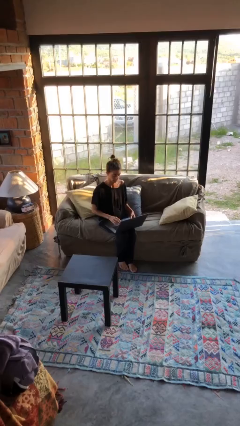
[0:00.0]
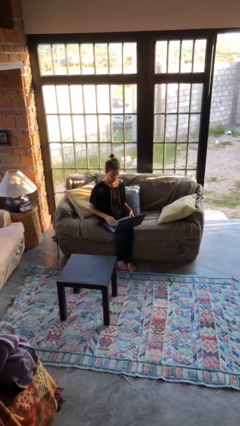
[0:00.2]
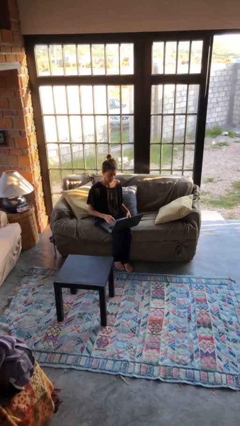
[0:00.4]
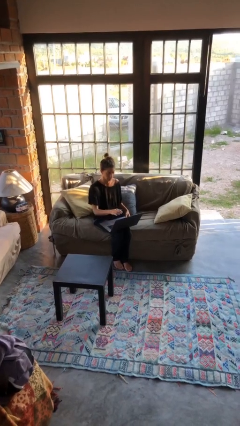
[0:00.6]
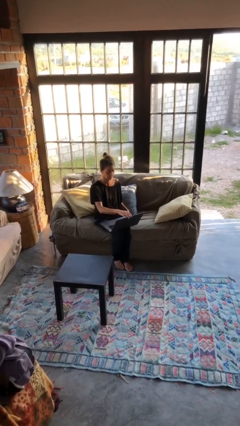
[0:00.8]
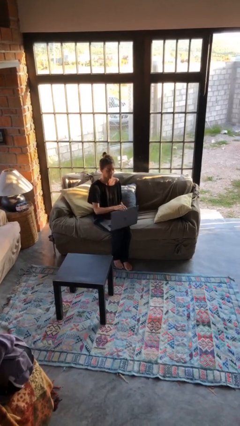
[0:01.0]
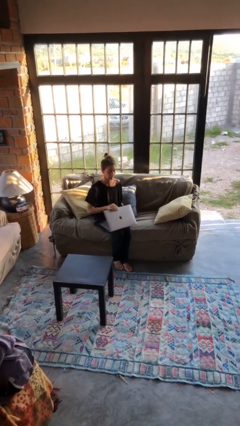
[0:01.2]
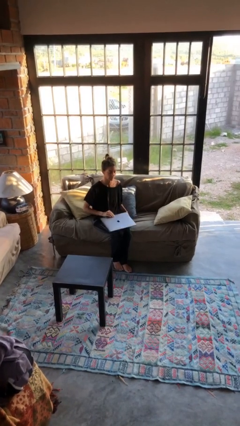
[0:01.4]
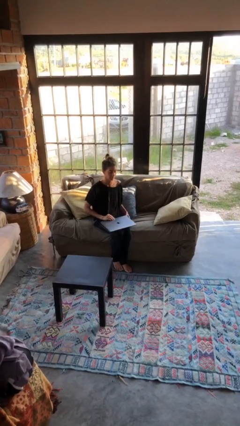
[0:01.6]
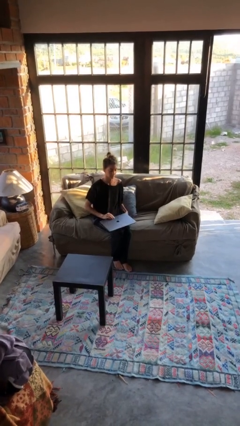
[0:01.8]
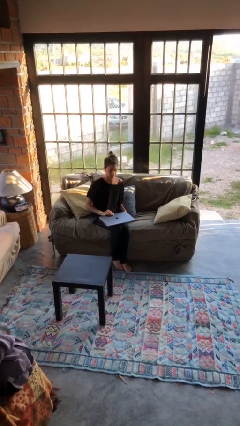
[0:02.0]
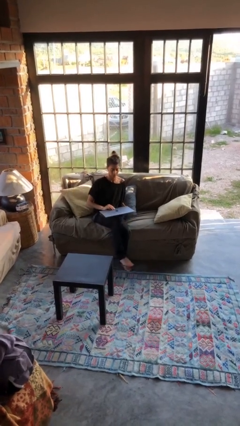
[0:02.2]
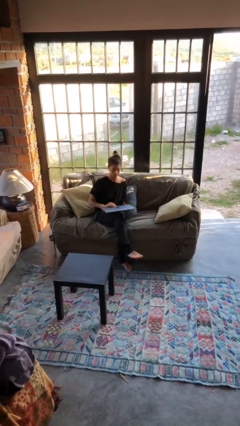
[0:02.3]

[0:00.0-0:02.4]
person closes laptop

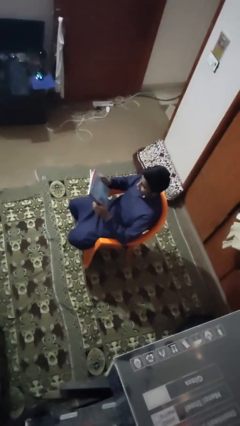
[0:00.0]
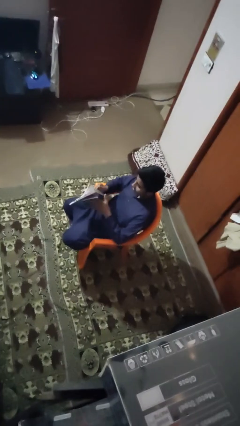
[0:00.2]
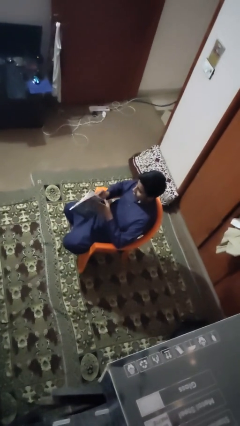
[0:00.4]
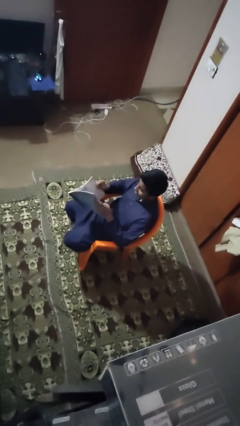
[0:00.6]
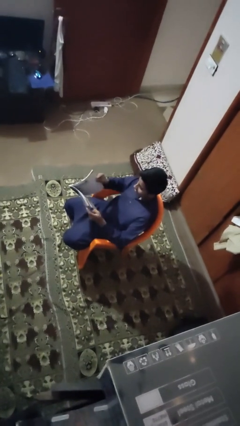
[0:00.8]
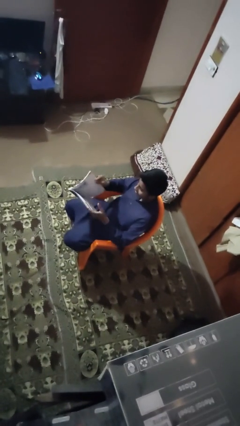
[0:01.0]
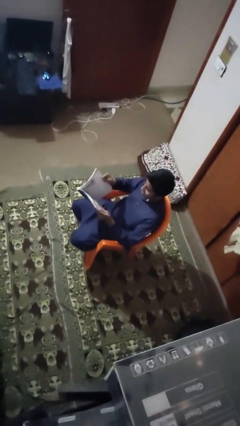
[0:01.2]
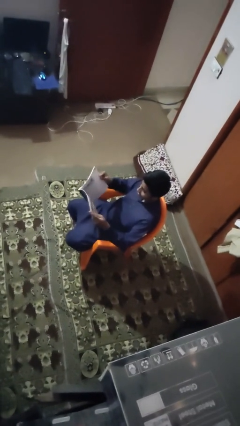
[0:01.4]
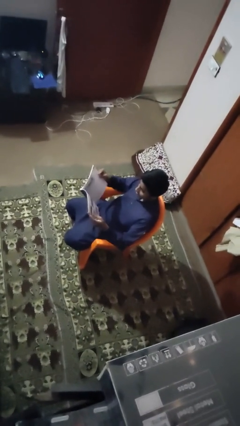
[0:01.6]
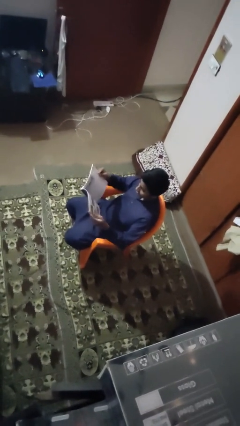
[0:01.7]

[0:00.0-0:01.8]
person reads book

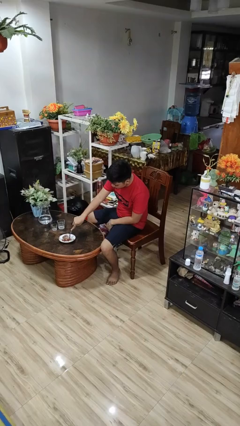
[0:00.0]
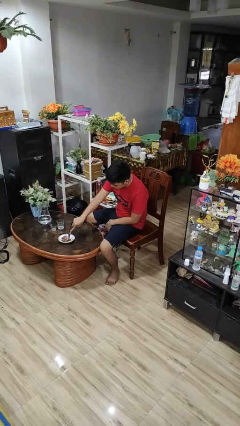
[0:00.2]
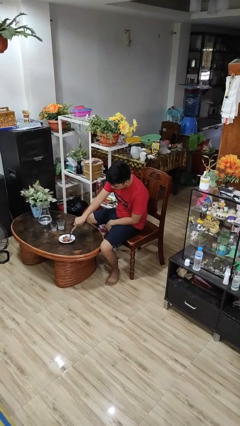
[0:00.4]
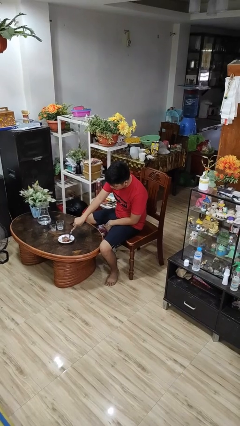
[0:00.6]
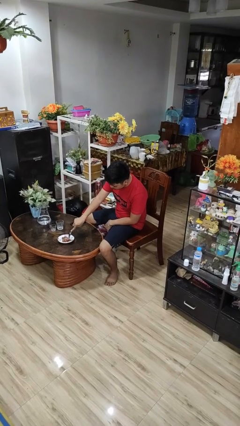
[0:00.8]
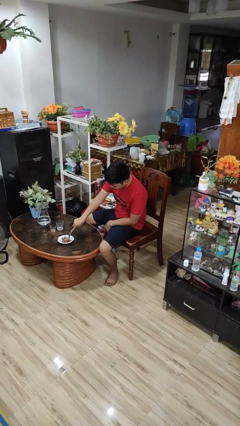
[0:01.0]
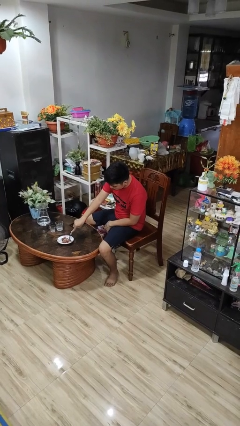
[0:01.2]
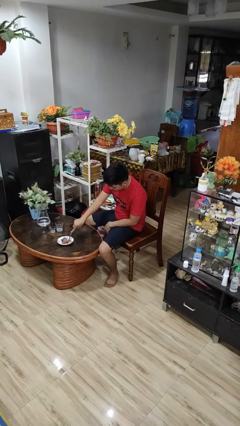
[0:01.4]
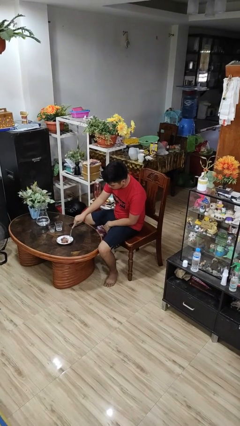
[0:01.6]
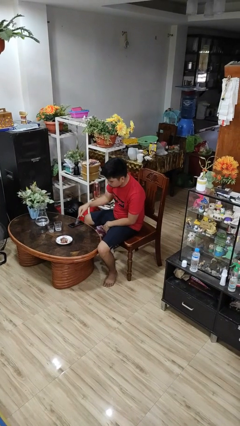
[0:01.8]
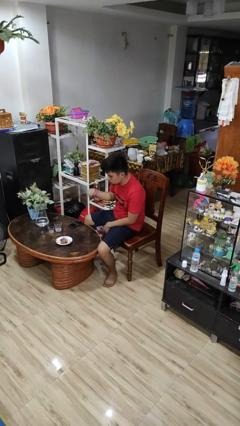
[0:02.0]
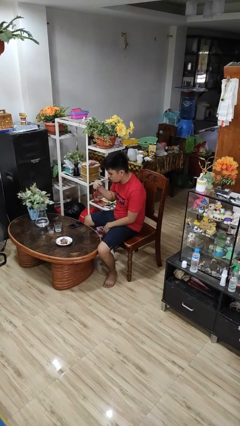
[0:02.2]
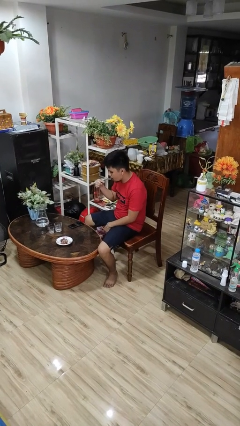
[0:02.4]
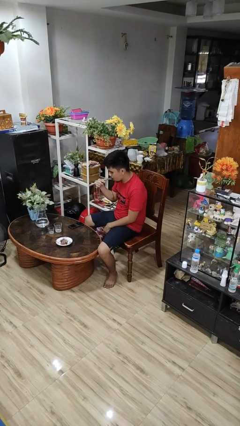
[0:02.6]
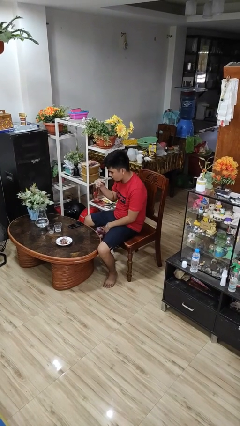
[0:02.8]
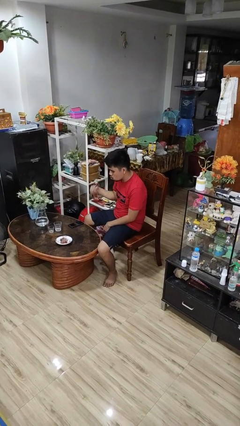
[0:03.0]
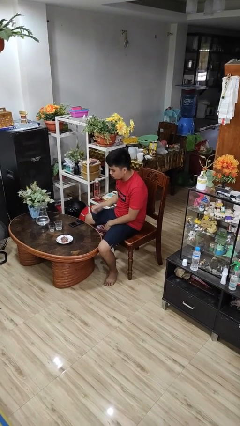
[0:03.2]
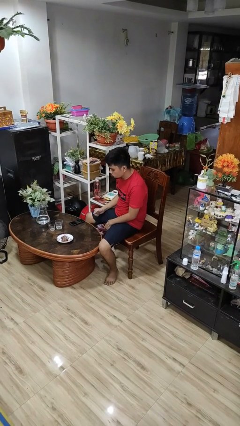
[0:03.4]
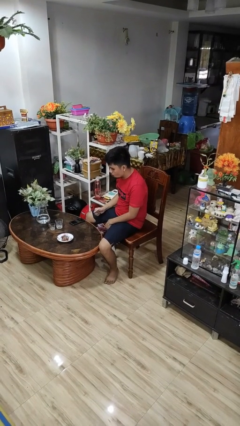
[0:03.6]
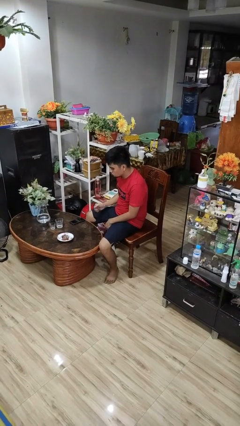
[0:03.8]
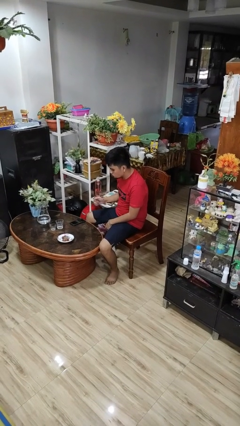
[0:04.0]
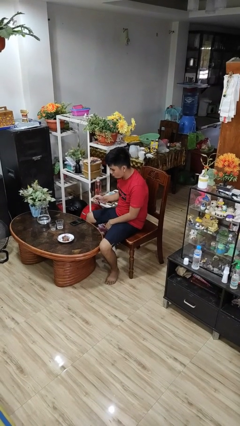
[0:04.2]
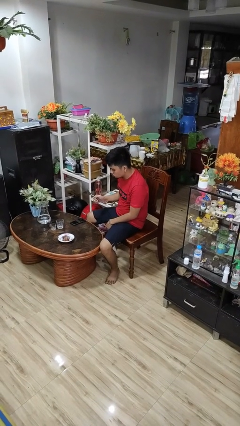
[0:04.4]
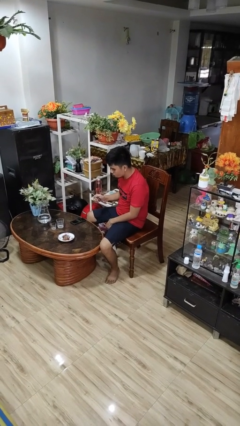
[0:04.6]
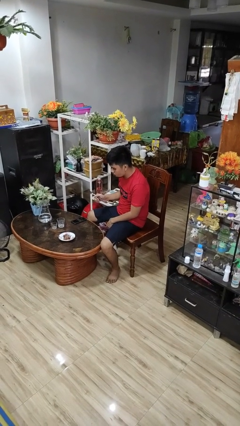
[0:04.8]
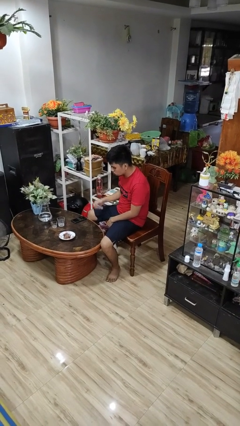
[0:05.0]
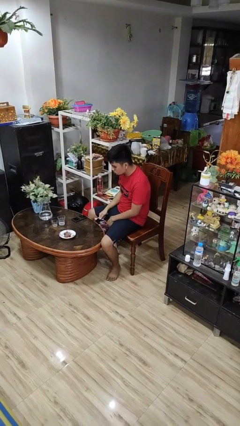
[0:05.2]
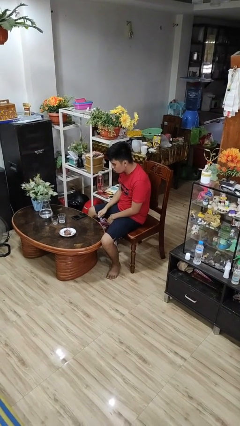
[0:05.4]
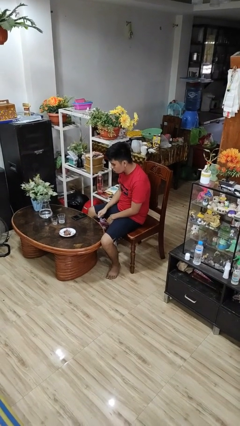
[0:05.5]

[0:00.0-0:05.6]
person eats with utensil

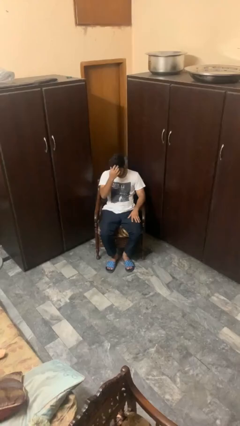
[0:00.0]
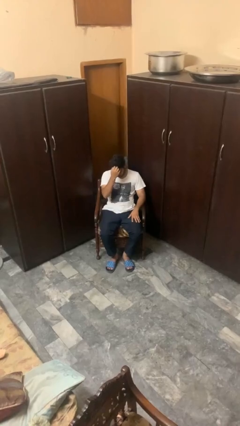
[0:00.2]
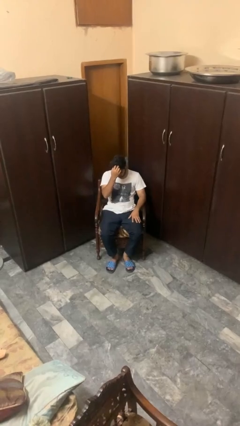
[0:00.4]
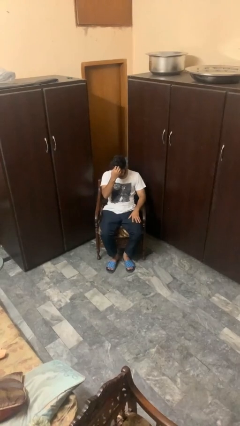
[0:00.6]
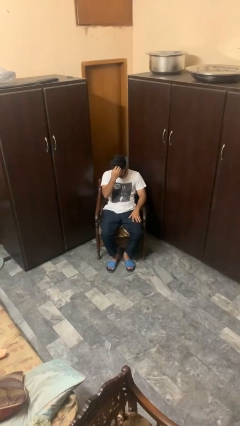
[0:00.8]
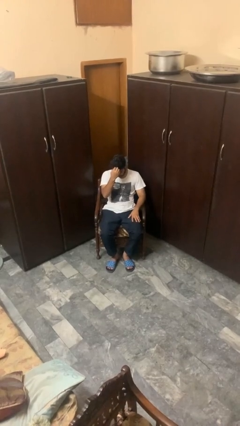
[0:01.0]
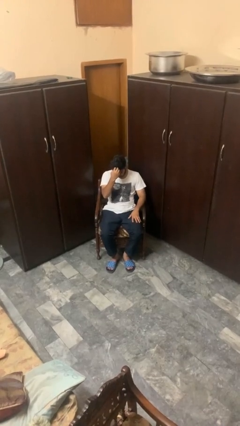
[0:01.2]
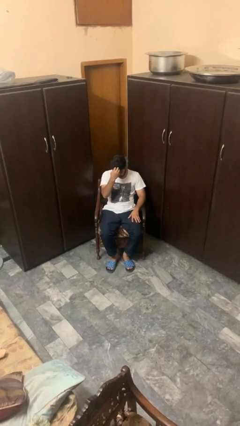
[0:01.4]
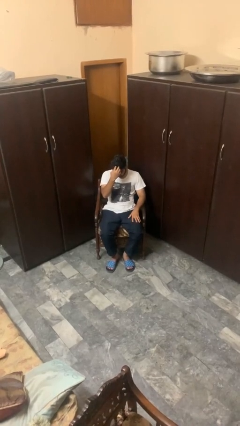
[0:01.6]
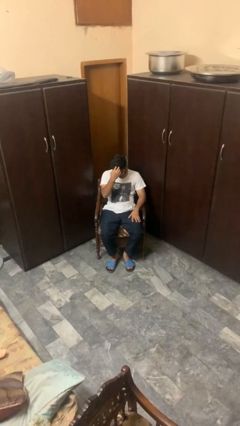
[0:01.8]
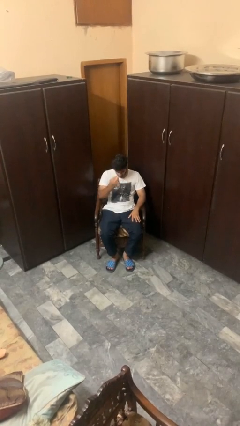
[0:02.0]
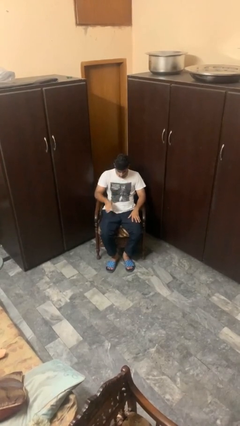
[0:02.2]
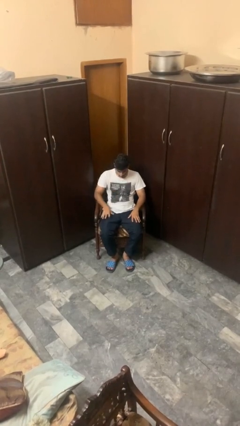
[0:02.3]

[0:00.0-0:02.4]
person scratches face

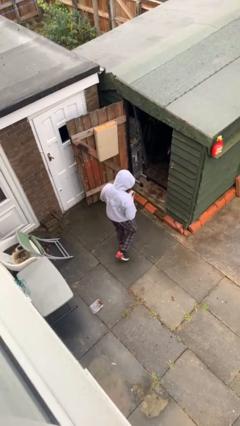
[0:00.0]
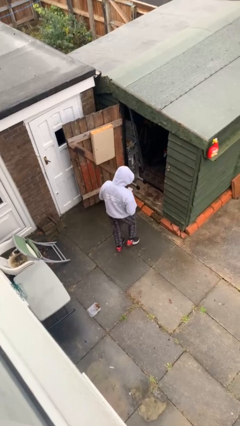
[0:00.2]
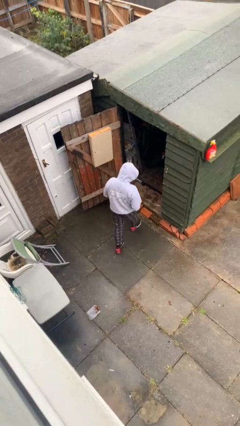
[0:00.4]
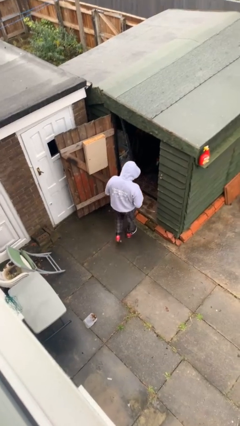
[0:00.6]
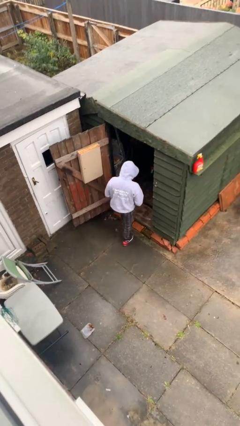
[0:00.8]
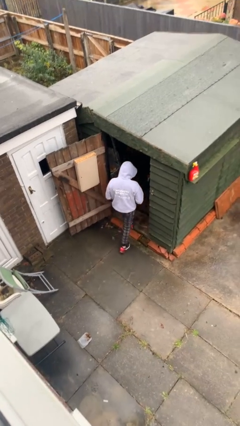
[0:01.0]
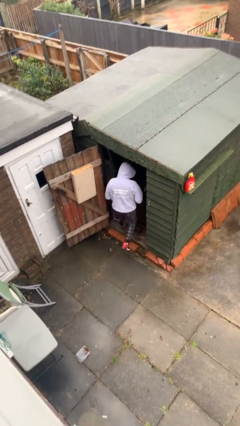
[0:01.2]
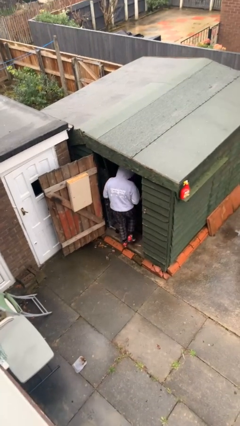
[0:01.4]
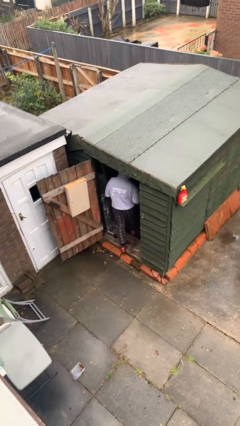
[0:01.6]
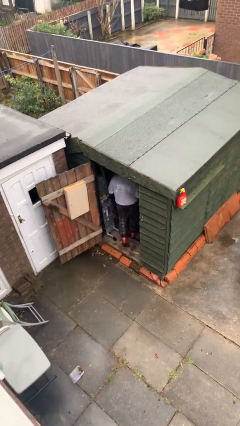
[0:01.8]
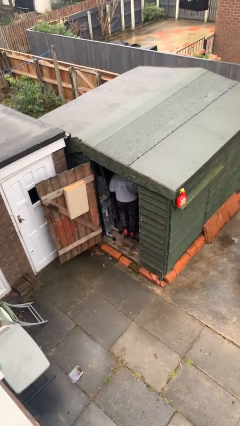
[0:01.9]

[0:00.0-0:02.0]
person exits scene through structure

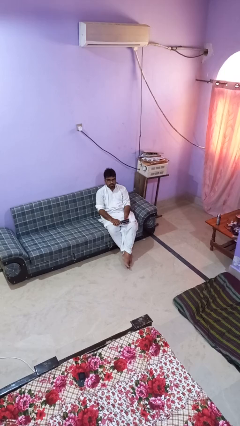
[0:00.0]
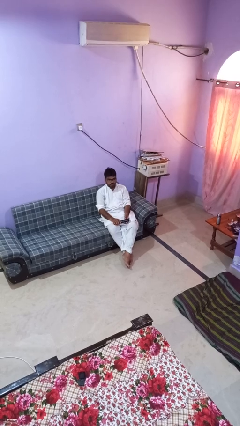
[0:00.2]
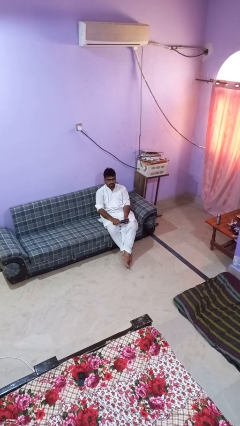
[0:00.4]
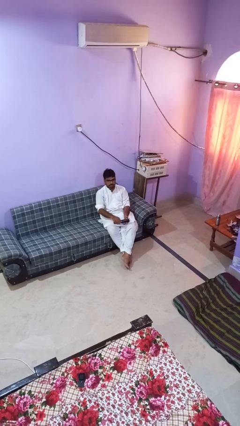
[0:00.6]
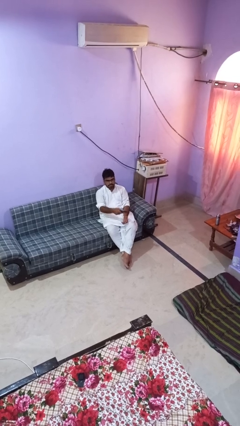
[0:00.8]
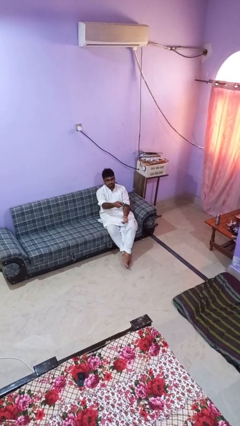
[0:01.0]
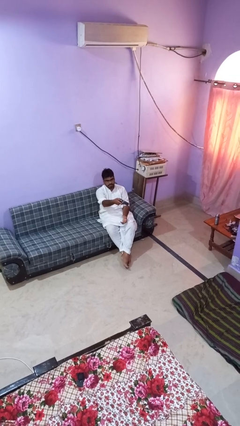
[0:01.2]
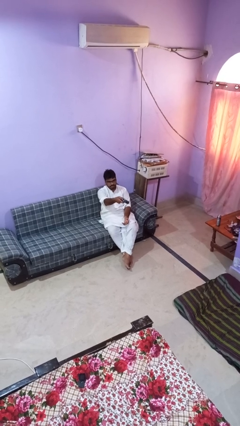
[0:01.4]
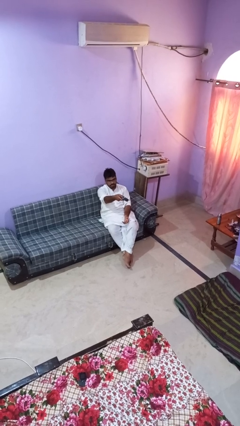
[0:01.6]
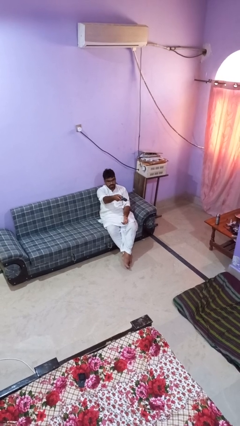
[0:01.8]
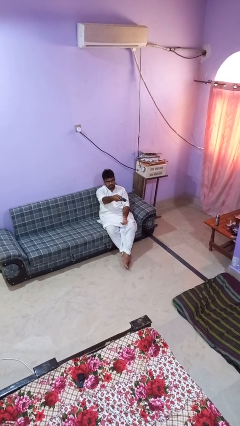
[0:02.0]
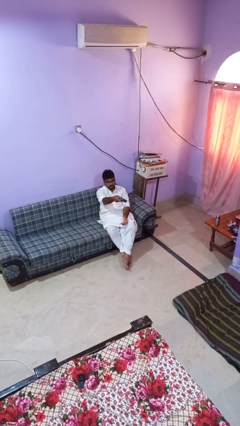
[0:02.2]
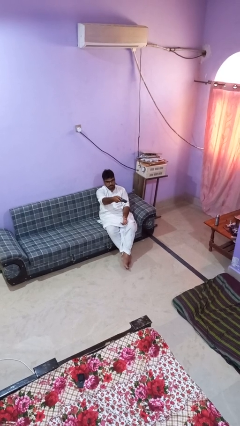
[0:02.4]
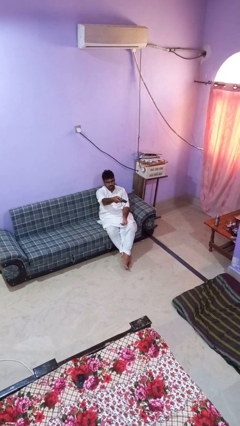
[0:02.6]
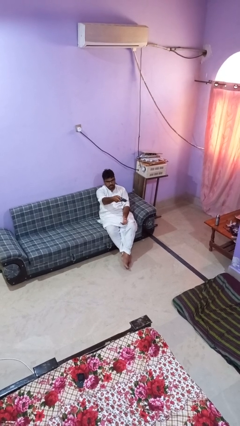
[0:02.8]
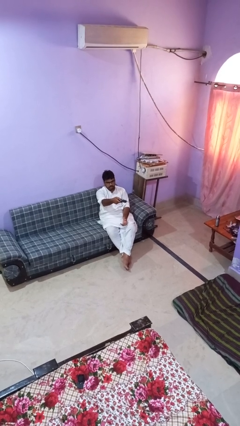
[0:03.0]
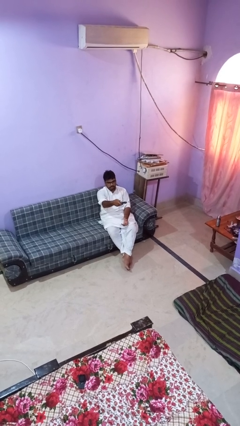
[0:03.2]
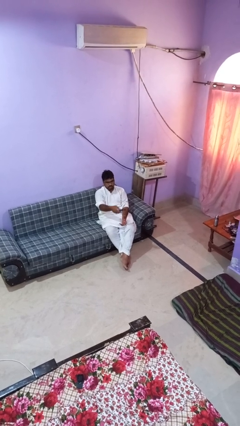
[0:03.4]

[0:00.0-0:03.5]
person uses television remote
